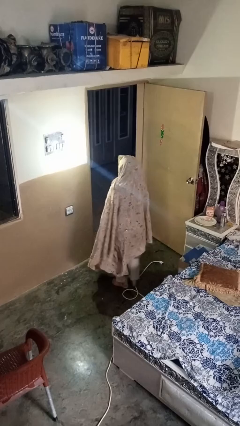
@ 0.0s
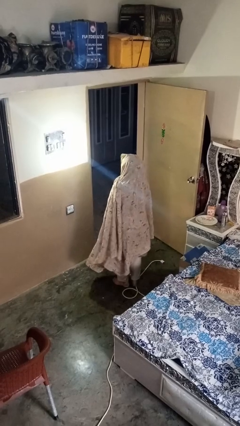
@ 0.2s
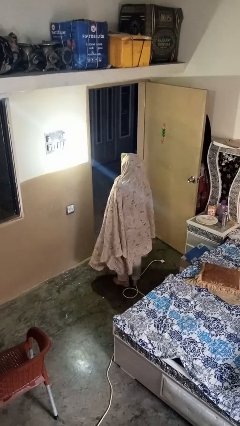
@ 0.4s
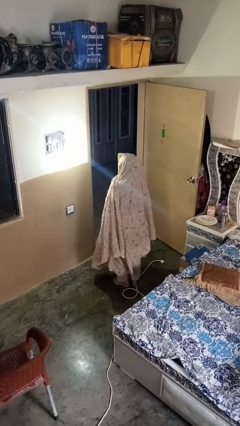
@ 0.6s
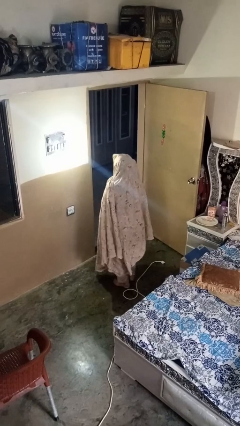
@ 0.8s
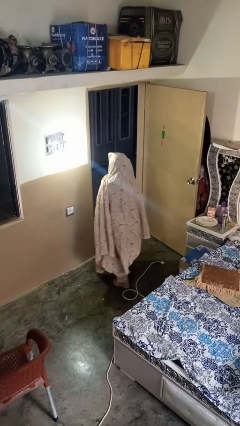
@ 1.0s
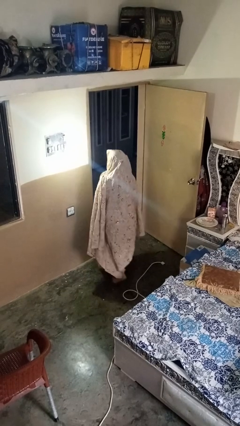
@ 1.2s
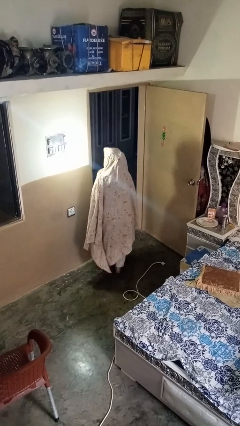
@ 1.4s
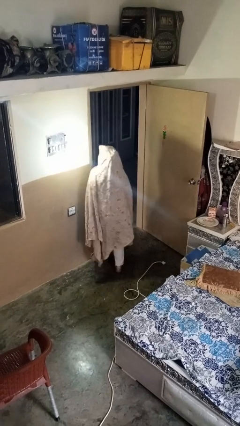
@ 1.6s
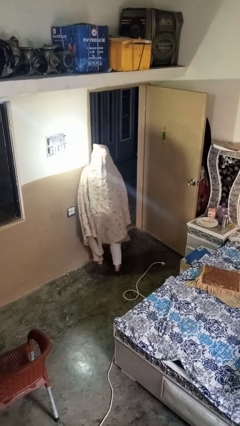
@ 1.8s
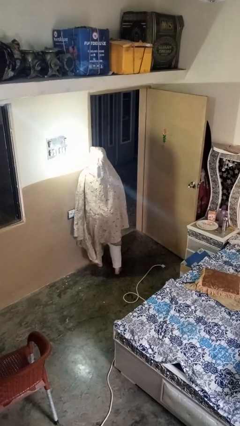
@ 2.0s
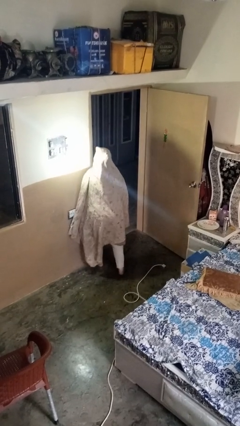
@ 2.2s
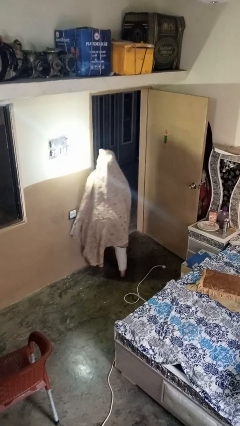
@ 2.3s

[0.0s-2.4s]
person bumps into wall

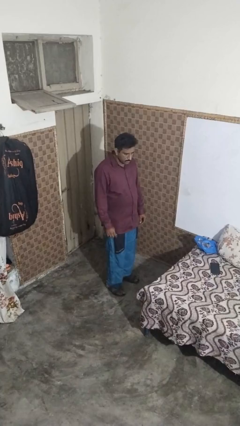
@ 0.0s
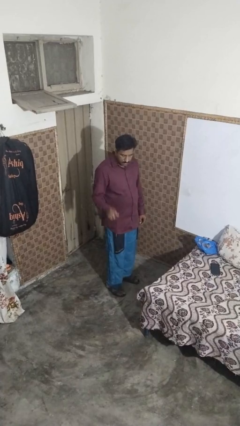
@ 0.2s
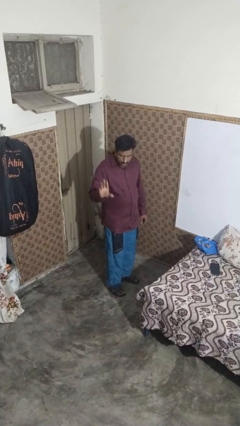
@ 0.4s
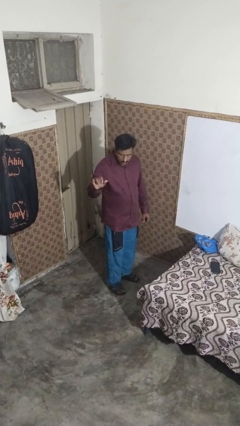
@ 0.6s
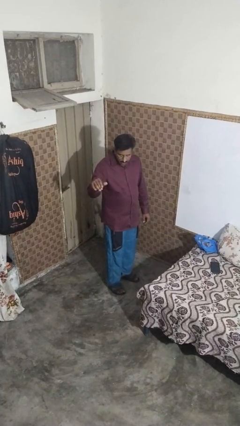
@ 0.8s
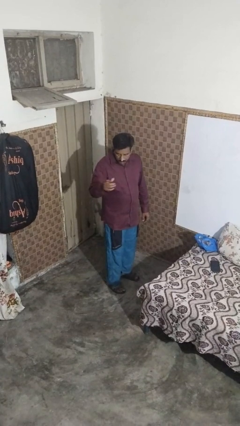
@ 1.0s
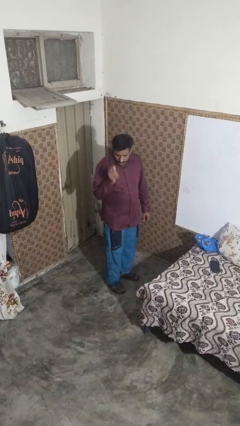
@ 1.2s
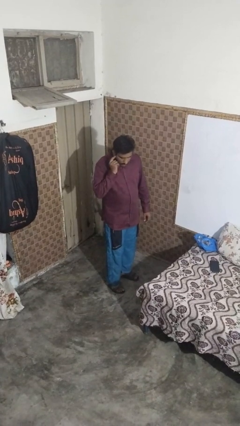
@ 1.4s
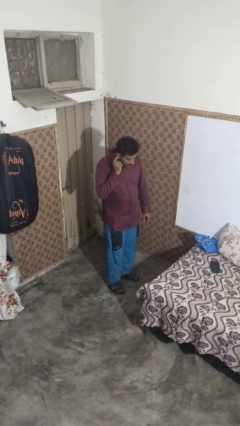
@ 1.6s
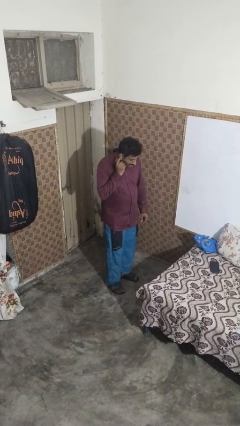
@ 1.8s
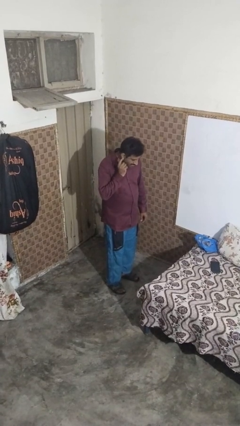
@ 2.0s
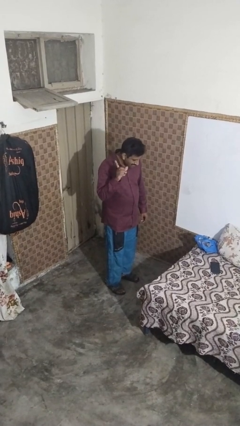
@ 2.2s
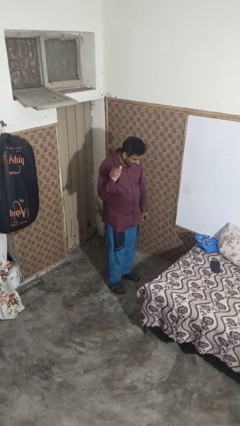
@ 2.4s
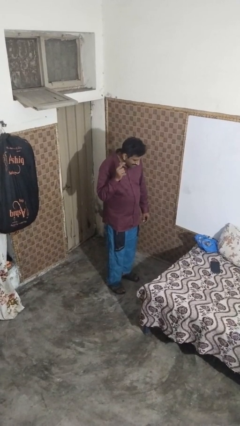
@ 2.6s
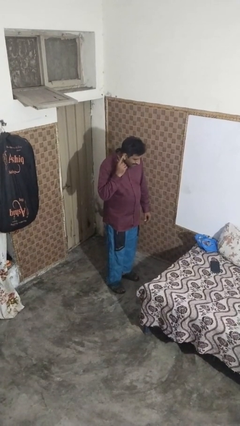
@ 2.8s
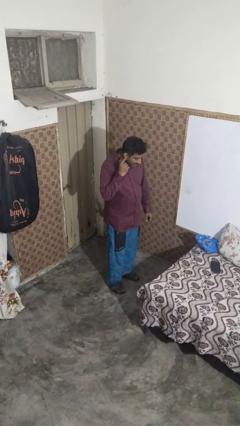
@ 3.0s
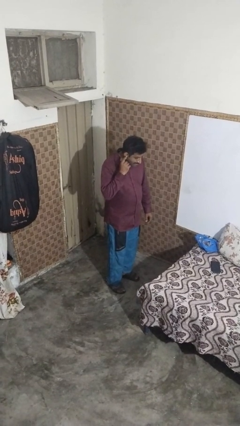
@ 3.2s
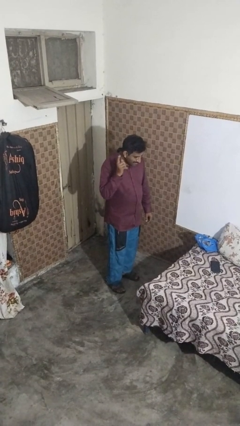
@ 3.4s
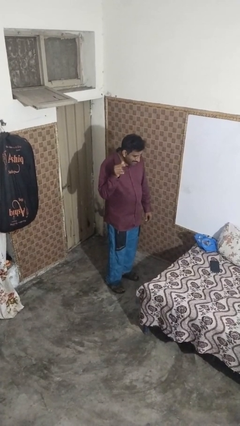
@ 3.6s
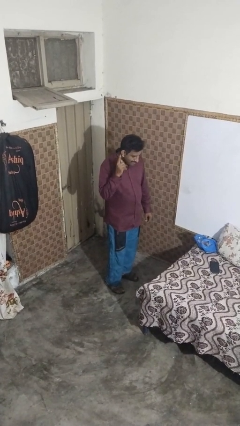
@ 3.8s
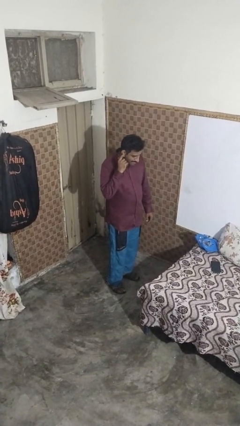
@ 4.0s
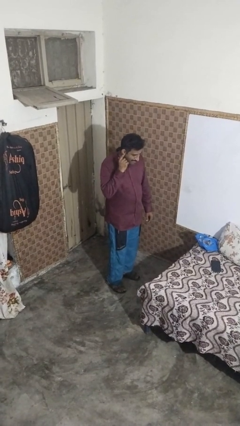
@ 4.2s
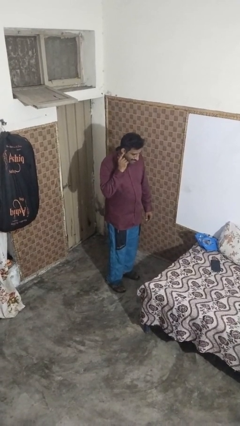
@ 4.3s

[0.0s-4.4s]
person gestures listen closely

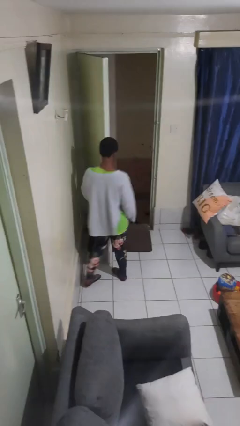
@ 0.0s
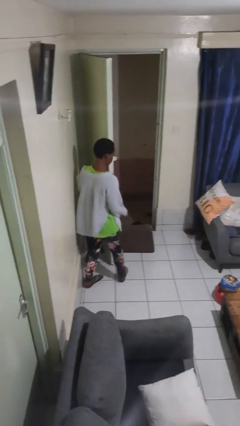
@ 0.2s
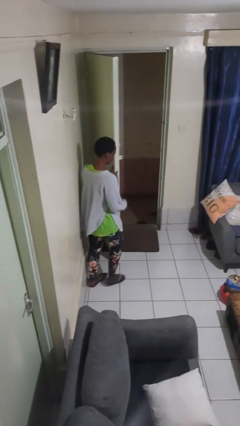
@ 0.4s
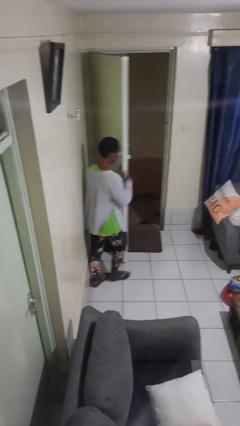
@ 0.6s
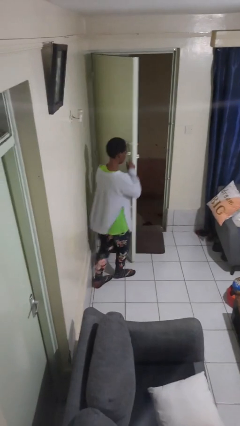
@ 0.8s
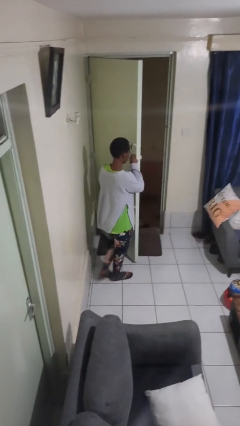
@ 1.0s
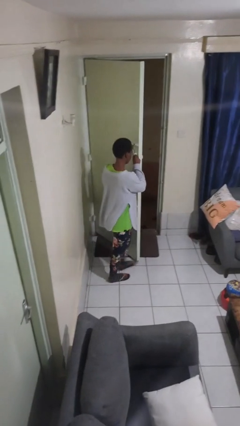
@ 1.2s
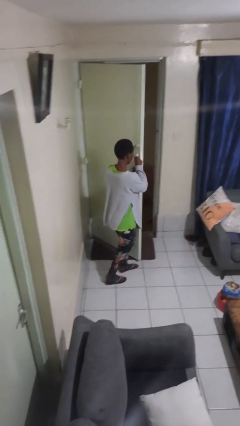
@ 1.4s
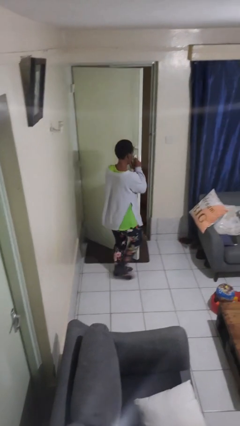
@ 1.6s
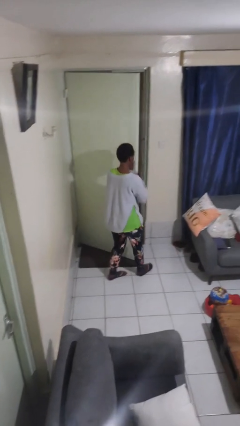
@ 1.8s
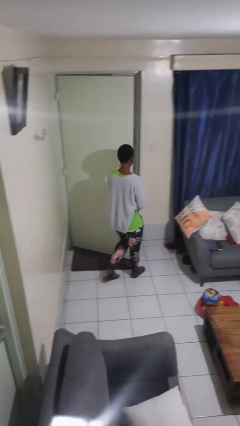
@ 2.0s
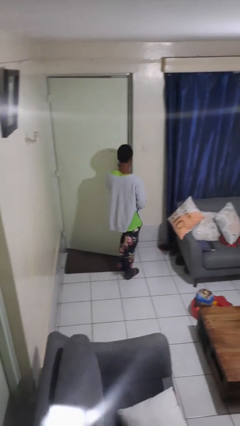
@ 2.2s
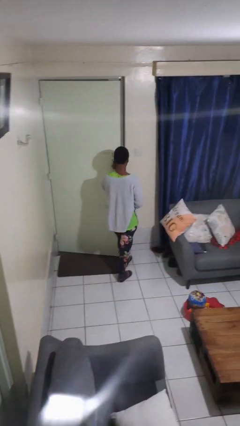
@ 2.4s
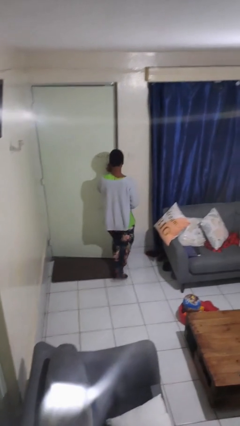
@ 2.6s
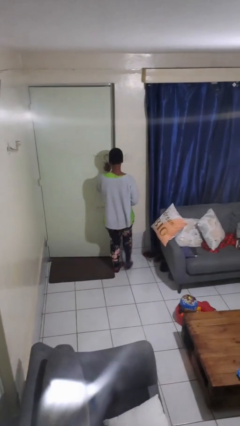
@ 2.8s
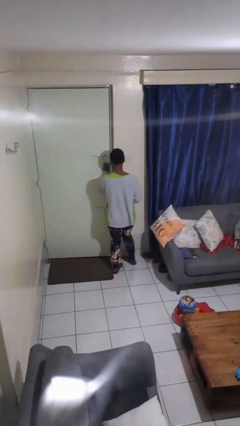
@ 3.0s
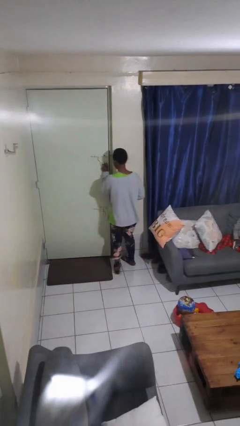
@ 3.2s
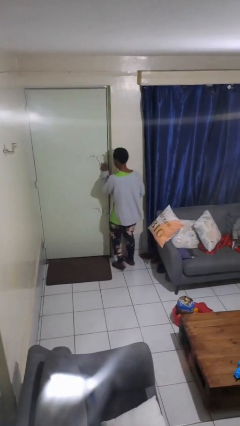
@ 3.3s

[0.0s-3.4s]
person closes facility door

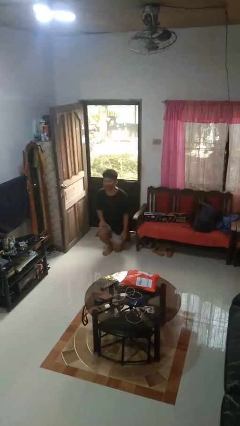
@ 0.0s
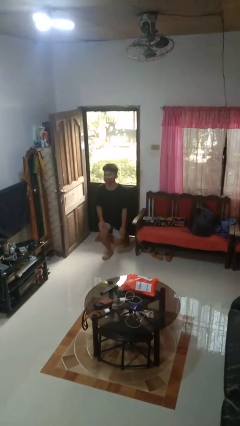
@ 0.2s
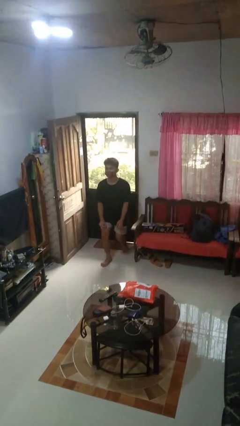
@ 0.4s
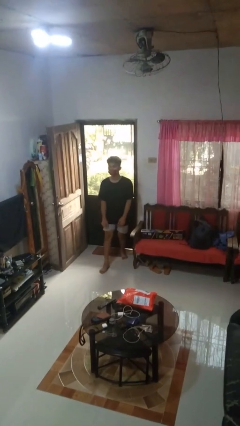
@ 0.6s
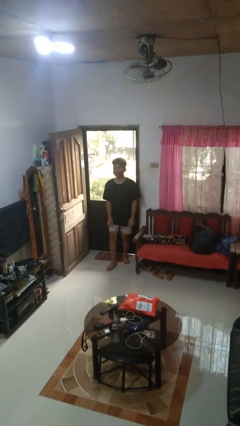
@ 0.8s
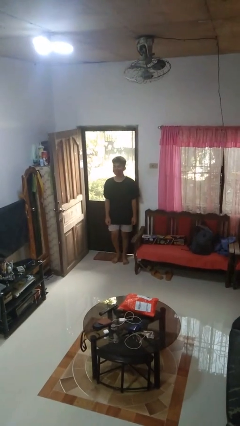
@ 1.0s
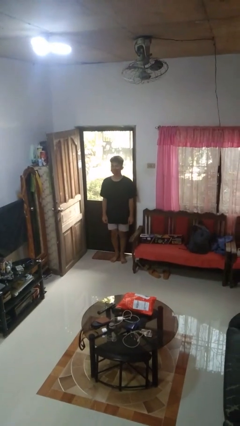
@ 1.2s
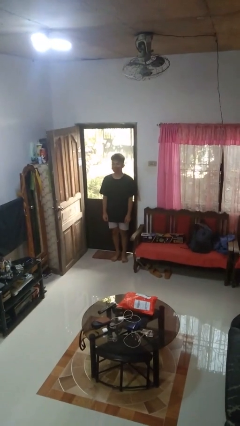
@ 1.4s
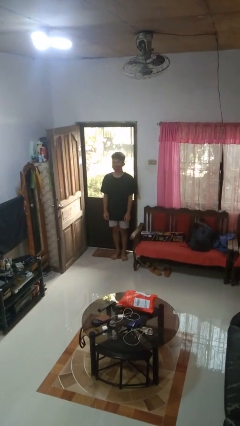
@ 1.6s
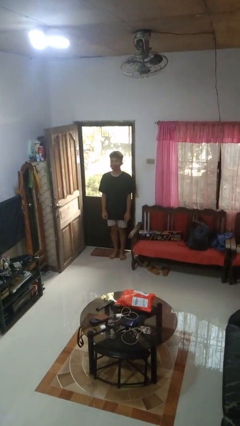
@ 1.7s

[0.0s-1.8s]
person stands up from floor

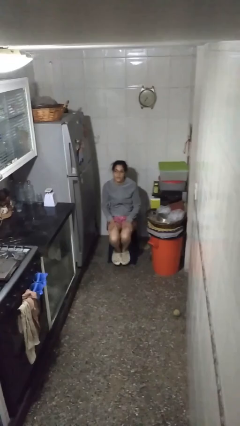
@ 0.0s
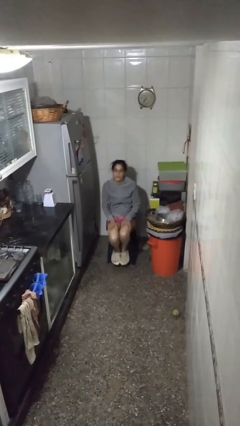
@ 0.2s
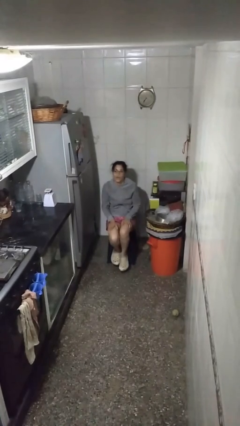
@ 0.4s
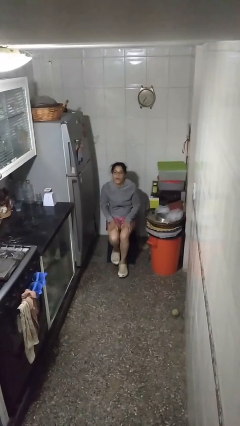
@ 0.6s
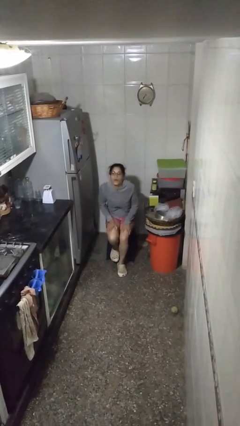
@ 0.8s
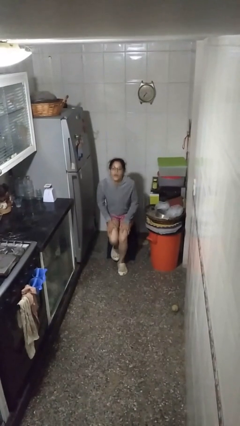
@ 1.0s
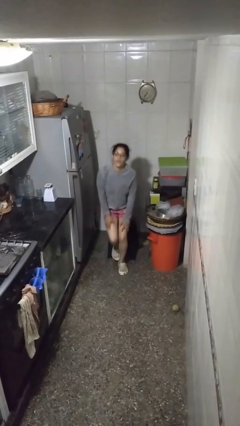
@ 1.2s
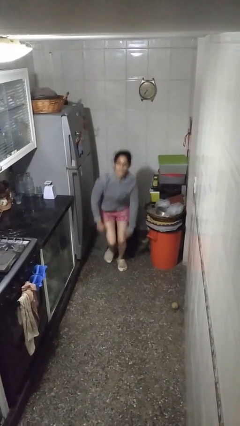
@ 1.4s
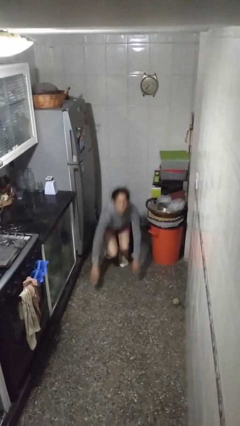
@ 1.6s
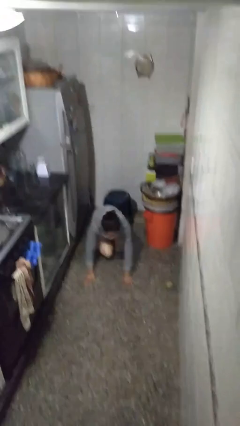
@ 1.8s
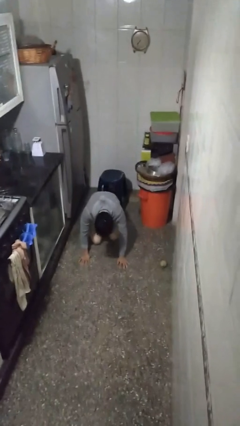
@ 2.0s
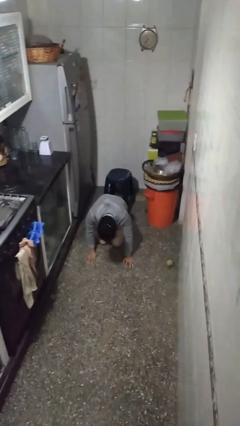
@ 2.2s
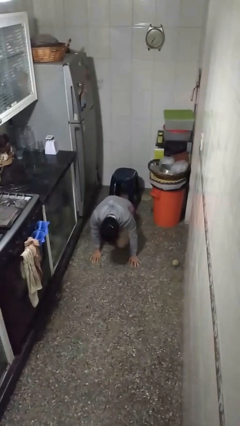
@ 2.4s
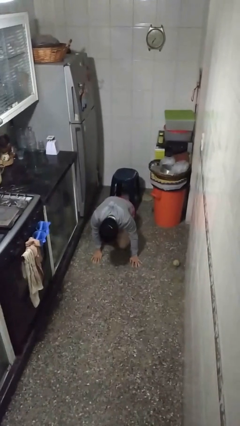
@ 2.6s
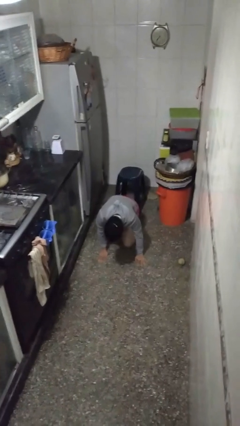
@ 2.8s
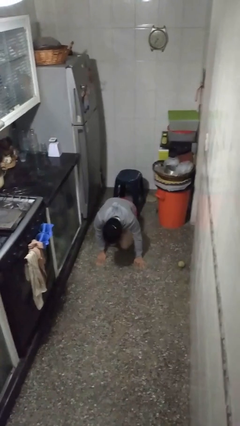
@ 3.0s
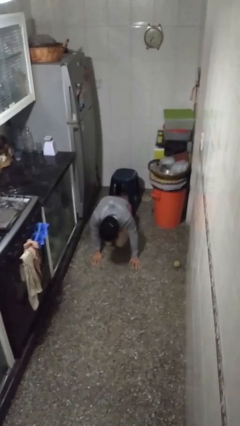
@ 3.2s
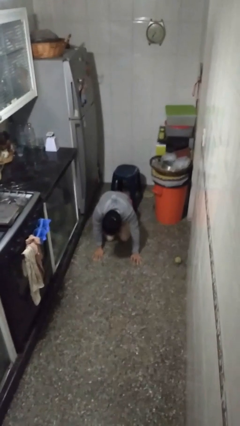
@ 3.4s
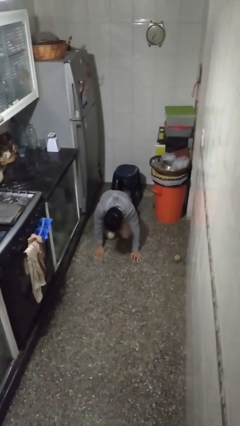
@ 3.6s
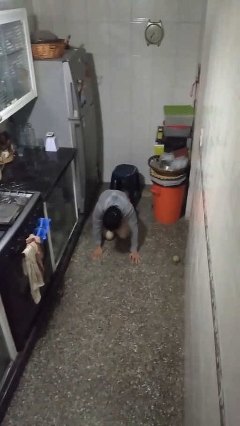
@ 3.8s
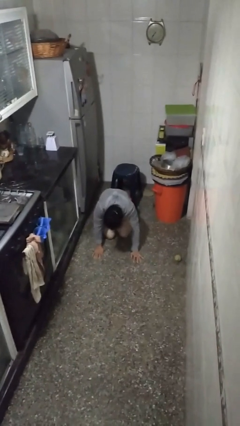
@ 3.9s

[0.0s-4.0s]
person falls from chair

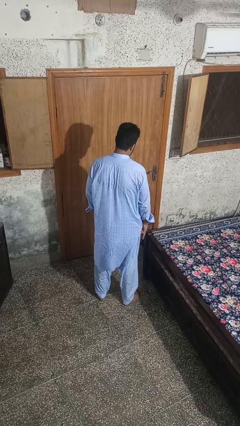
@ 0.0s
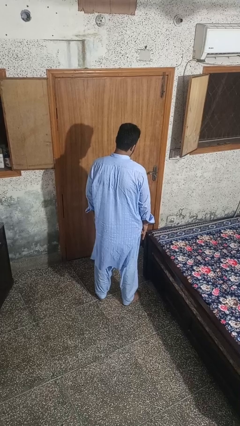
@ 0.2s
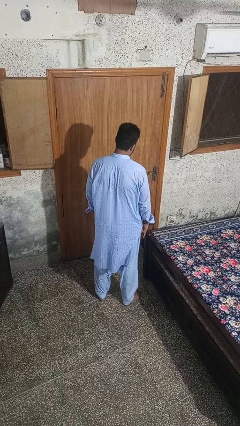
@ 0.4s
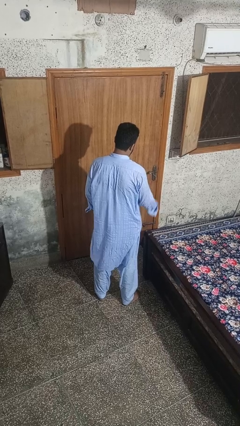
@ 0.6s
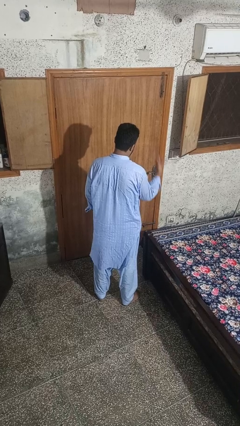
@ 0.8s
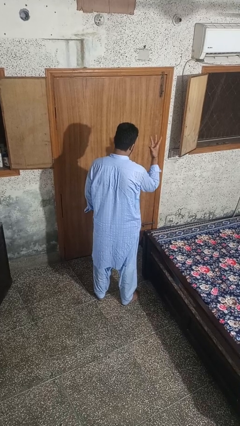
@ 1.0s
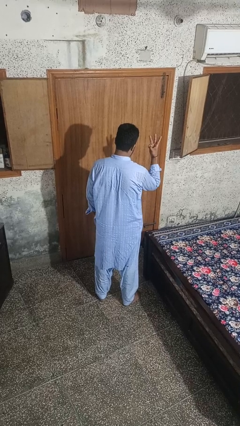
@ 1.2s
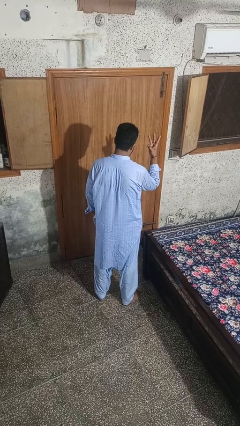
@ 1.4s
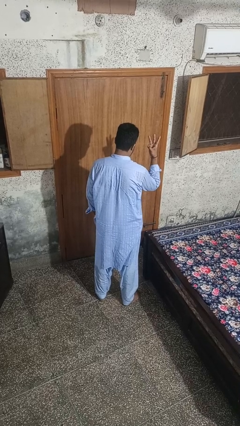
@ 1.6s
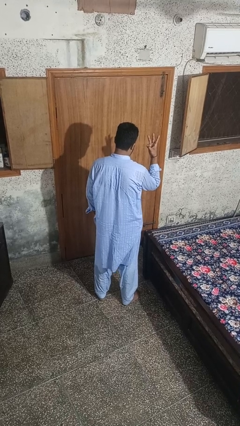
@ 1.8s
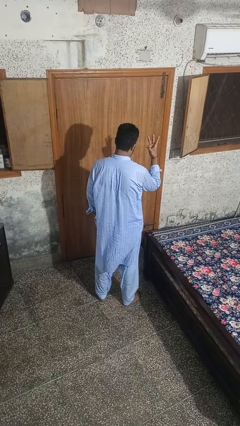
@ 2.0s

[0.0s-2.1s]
person gestures number three
